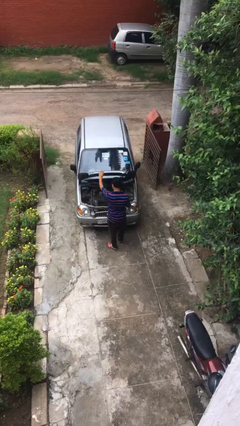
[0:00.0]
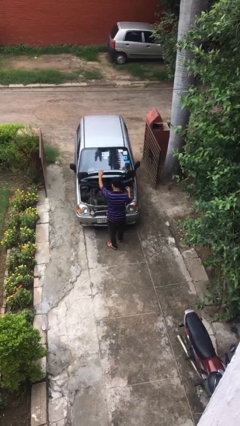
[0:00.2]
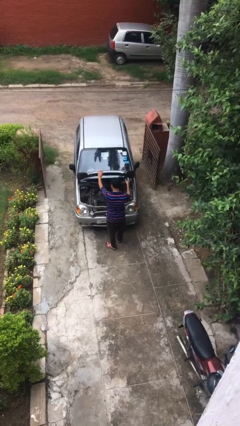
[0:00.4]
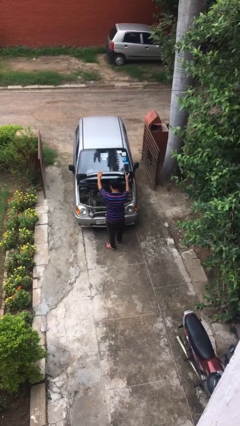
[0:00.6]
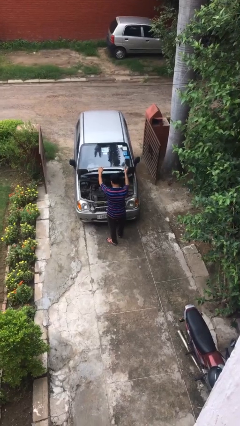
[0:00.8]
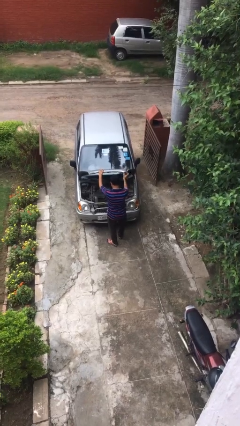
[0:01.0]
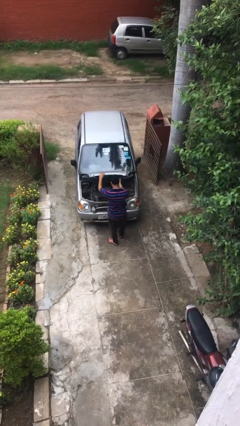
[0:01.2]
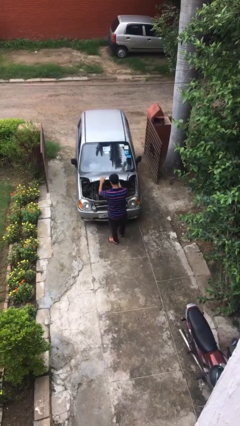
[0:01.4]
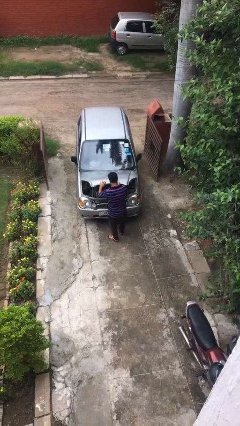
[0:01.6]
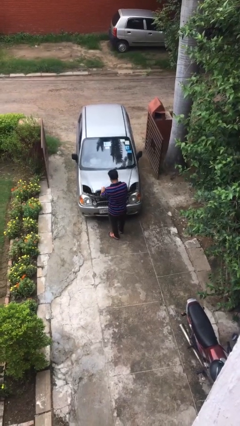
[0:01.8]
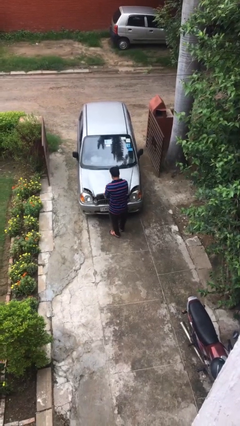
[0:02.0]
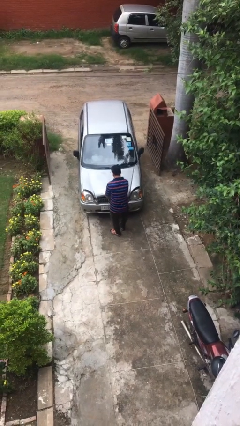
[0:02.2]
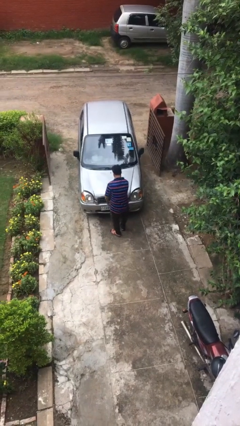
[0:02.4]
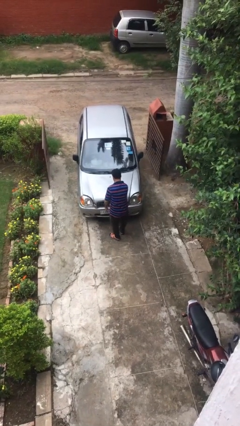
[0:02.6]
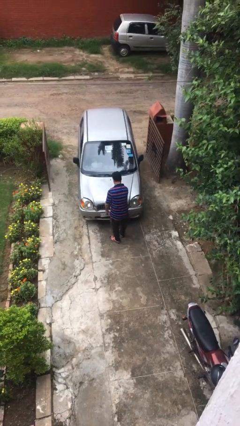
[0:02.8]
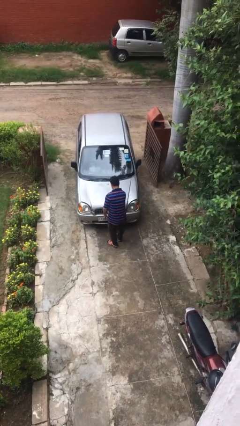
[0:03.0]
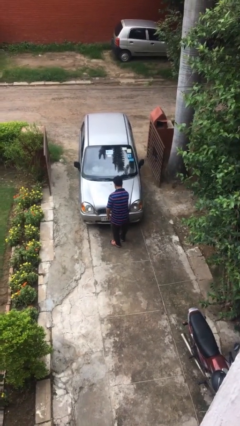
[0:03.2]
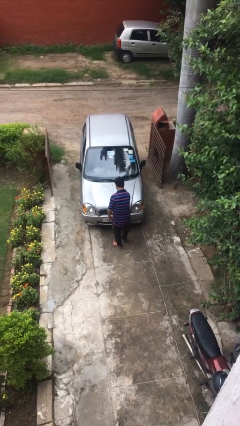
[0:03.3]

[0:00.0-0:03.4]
person closes car hood

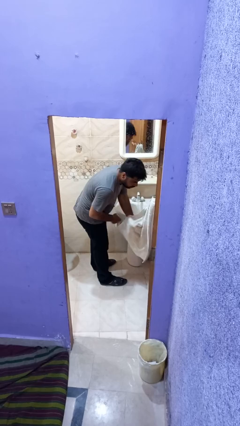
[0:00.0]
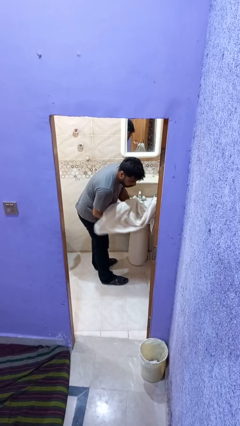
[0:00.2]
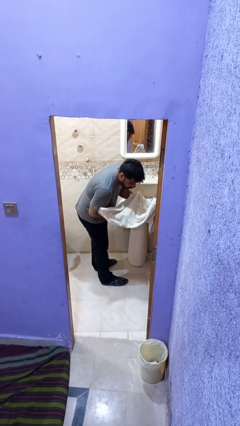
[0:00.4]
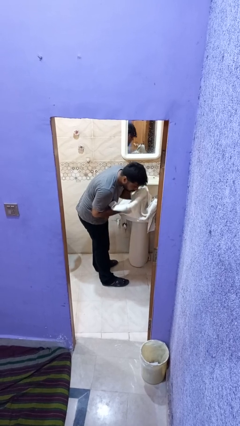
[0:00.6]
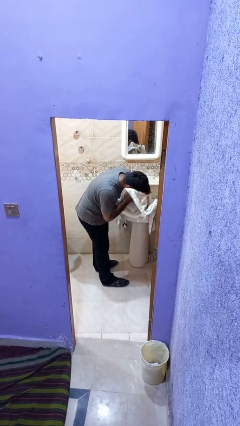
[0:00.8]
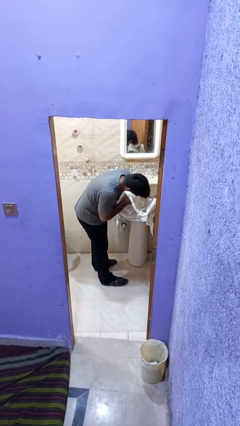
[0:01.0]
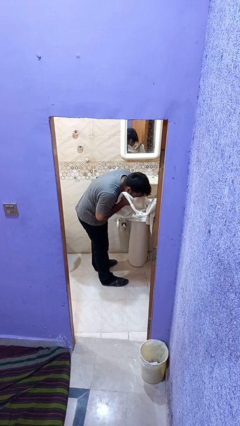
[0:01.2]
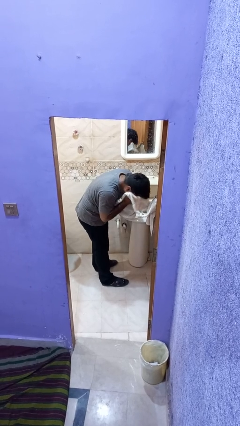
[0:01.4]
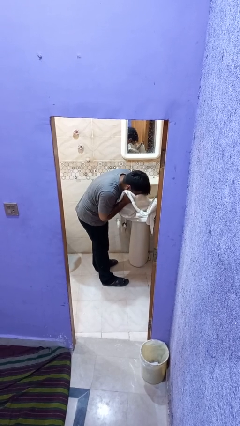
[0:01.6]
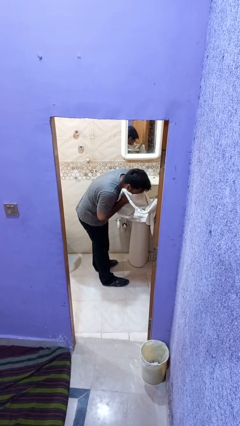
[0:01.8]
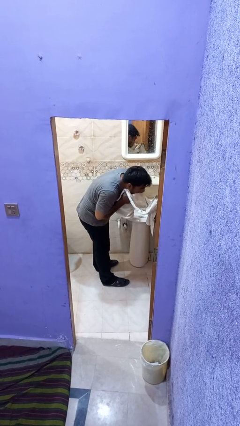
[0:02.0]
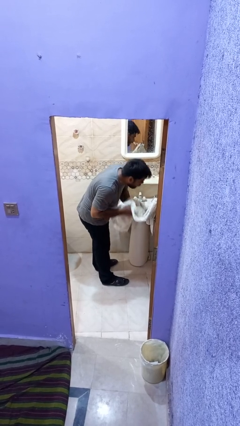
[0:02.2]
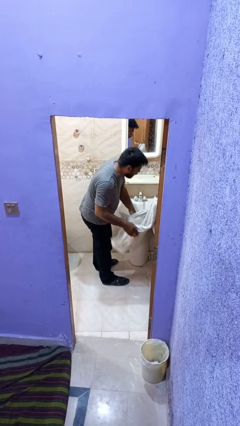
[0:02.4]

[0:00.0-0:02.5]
person dries face with towel

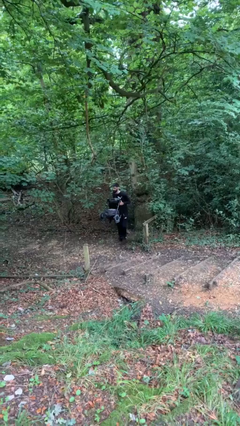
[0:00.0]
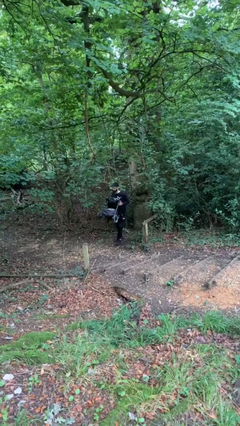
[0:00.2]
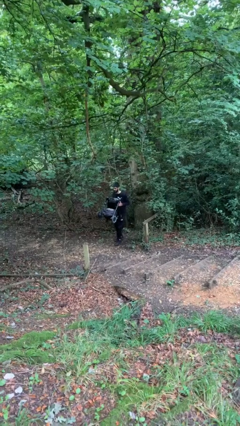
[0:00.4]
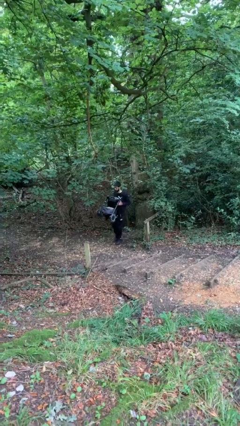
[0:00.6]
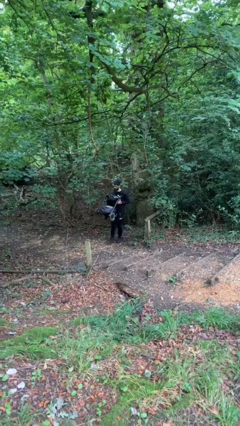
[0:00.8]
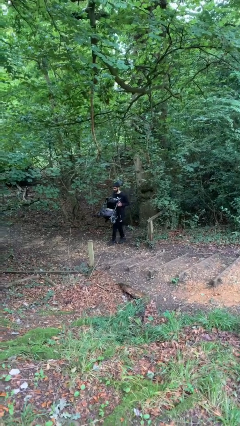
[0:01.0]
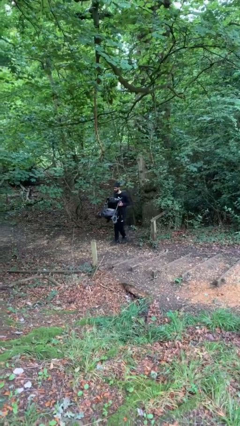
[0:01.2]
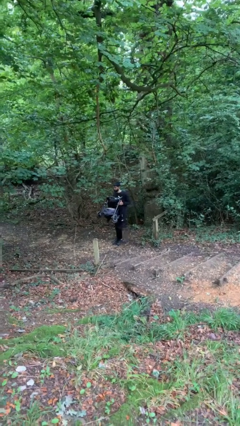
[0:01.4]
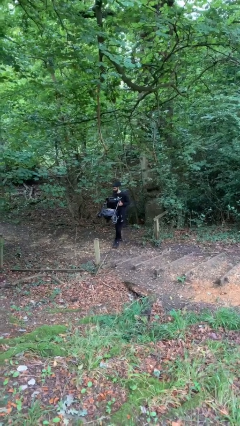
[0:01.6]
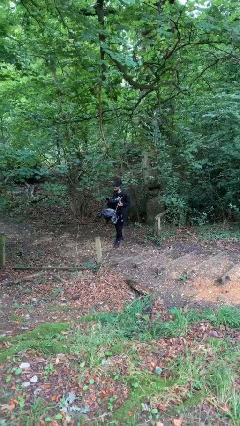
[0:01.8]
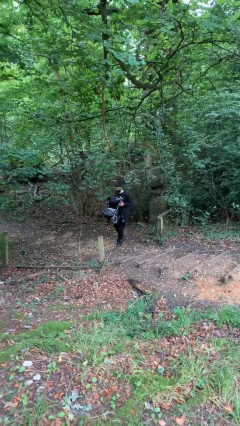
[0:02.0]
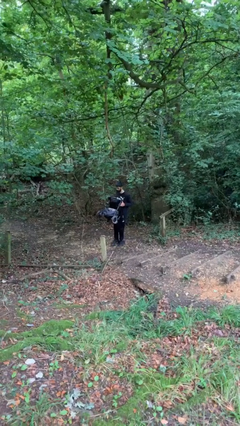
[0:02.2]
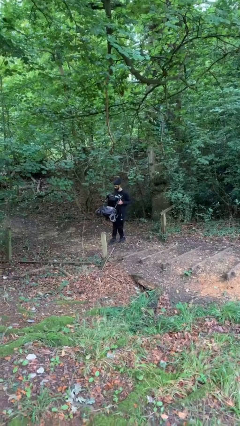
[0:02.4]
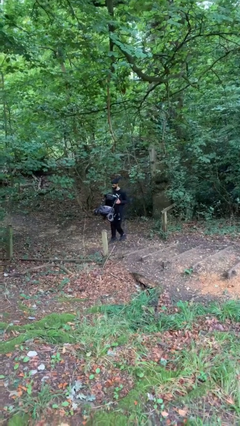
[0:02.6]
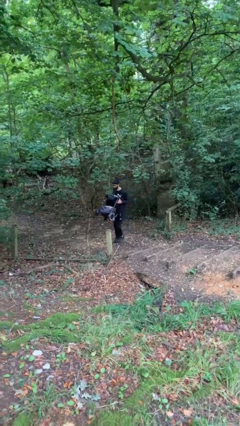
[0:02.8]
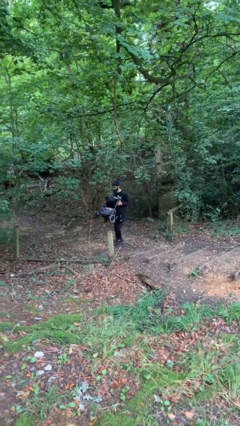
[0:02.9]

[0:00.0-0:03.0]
person carries heavy object

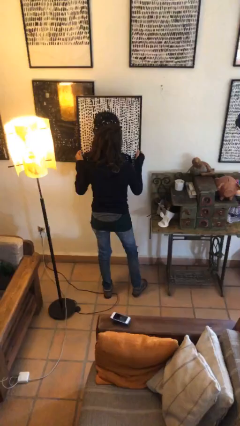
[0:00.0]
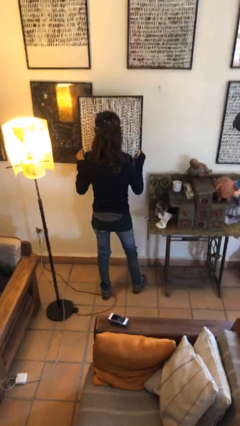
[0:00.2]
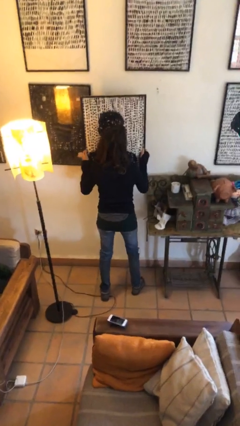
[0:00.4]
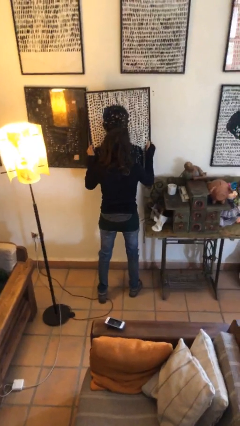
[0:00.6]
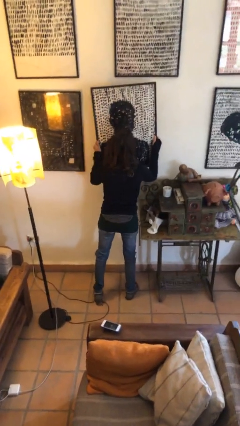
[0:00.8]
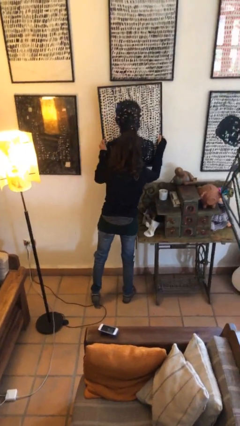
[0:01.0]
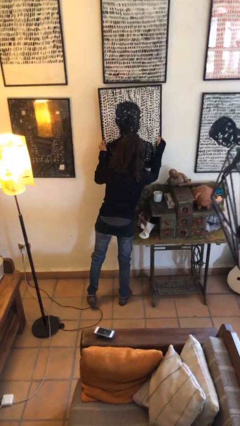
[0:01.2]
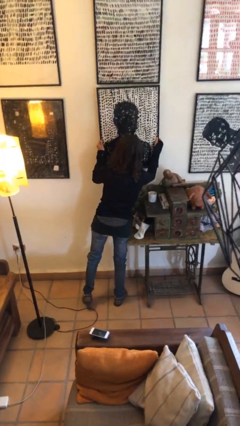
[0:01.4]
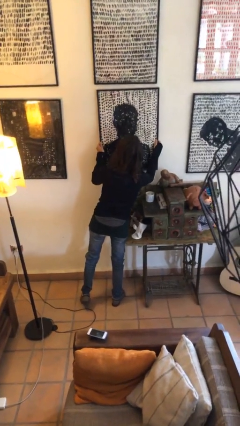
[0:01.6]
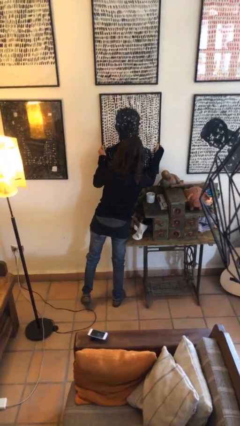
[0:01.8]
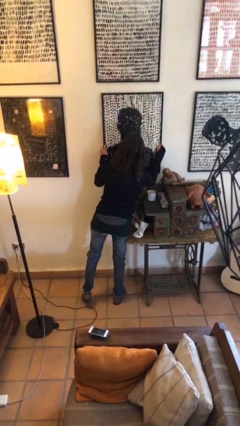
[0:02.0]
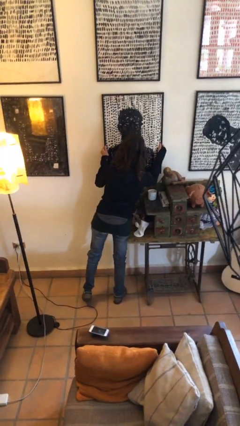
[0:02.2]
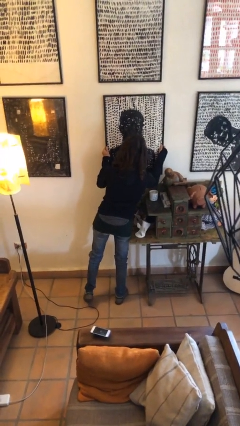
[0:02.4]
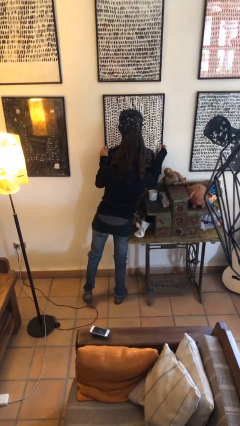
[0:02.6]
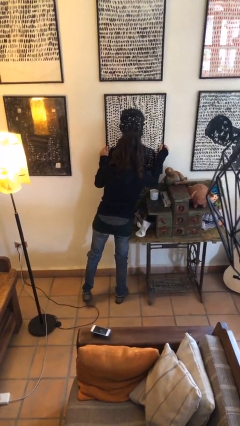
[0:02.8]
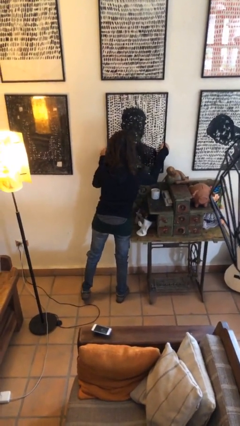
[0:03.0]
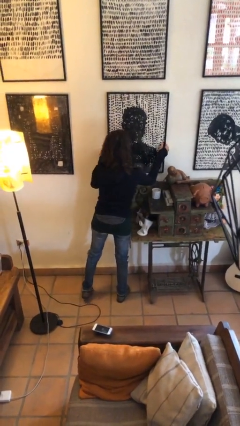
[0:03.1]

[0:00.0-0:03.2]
person puts up picture frame

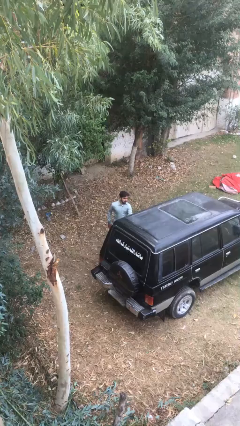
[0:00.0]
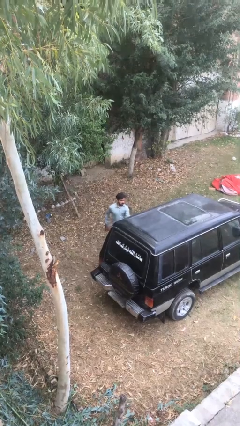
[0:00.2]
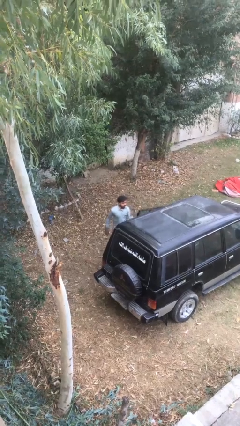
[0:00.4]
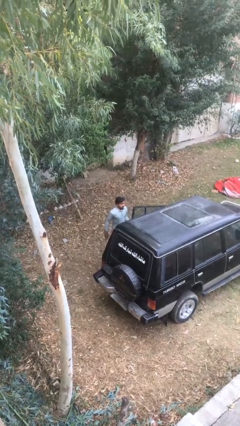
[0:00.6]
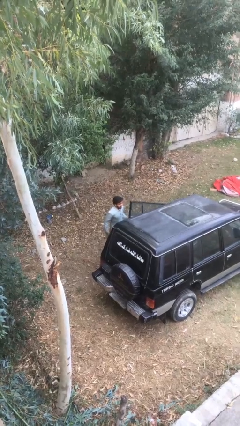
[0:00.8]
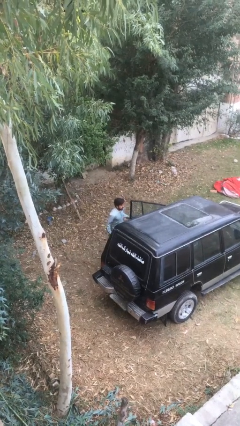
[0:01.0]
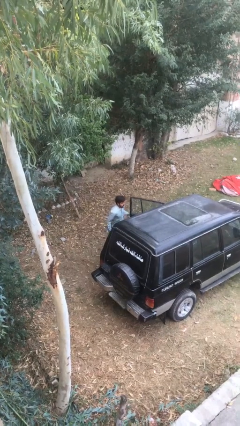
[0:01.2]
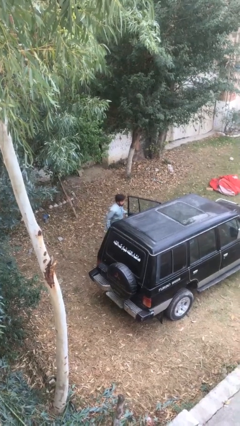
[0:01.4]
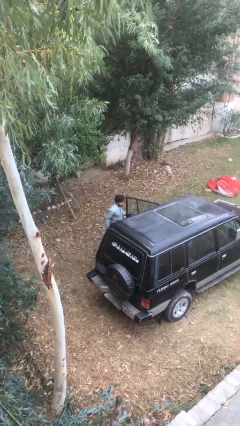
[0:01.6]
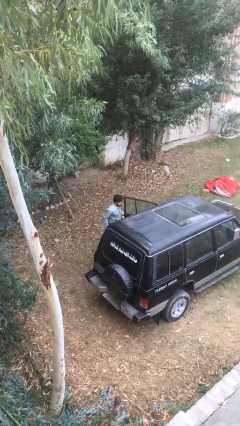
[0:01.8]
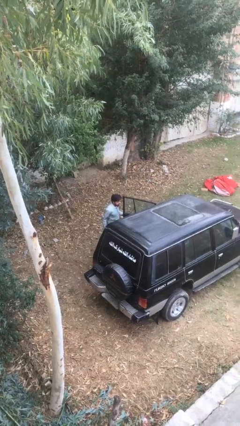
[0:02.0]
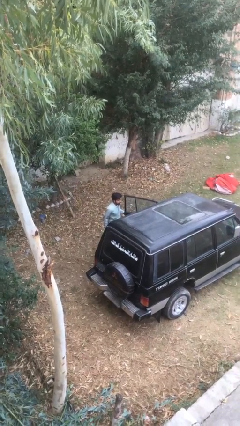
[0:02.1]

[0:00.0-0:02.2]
person opens car door

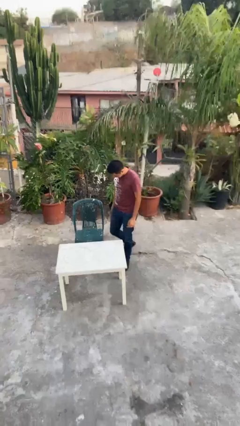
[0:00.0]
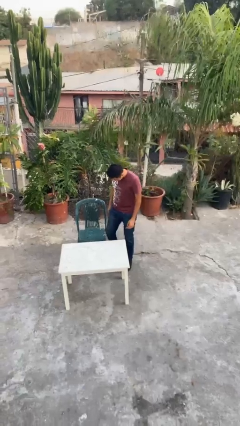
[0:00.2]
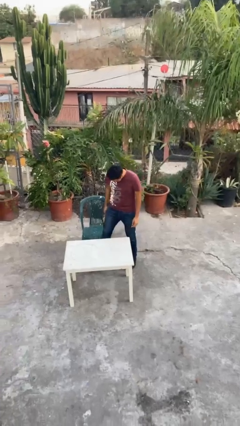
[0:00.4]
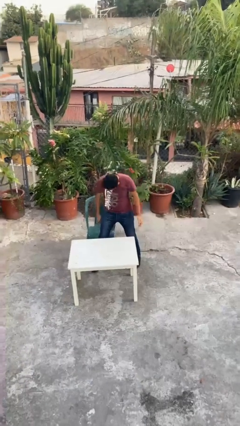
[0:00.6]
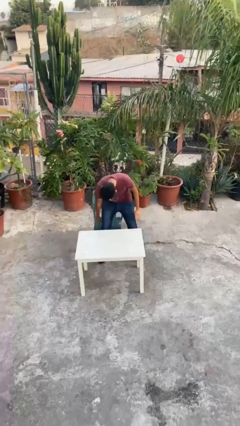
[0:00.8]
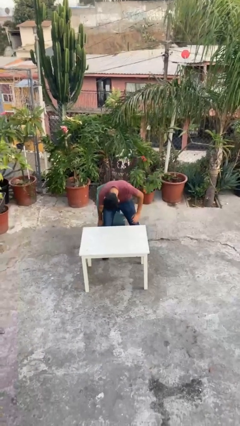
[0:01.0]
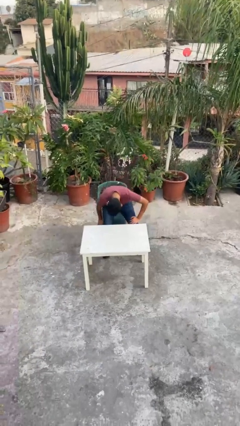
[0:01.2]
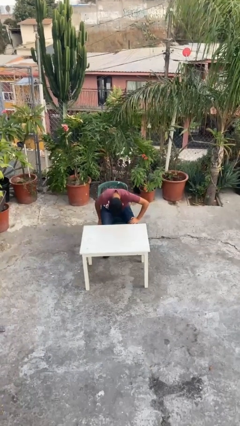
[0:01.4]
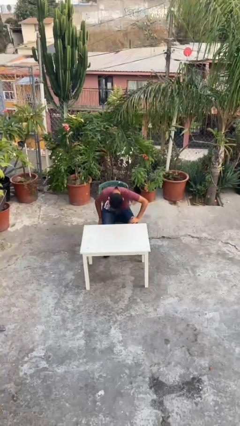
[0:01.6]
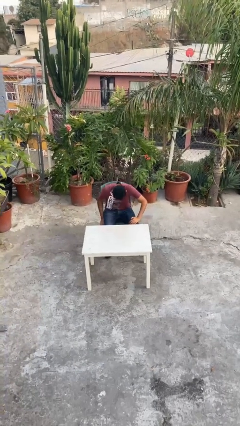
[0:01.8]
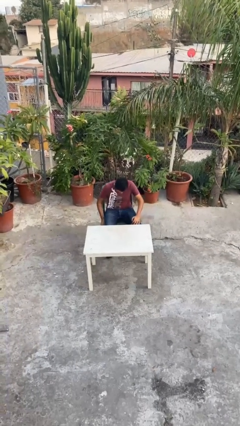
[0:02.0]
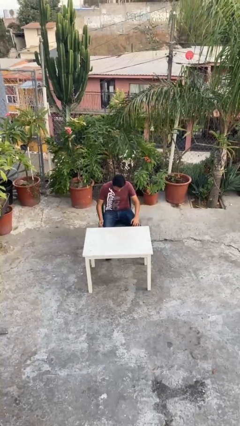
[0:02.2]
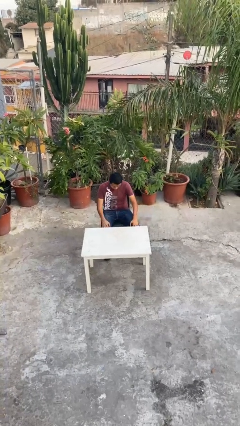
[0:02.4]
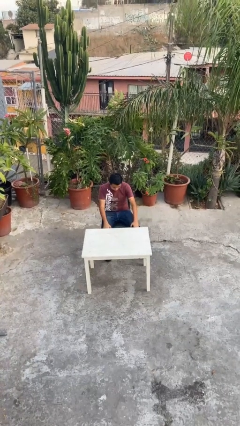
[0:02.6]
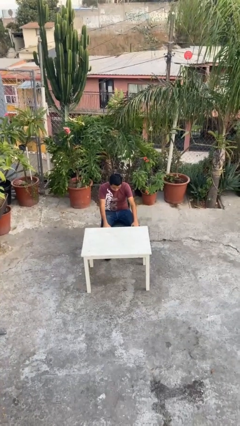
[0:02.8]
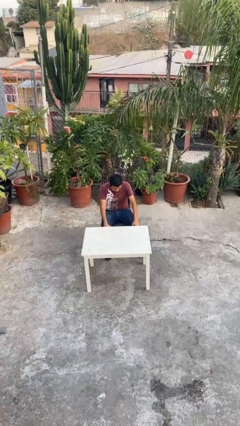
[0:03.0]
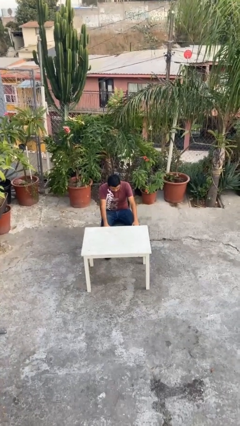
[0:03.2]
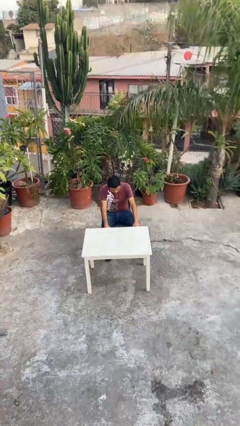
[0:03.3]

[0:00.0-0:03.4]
person sits down
